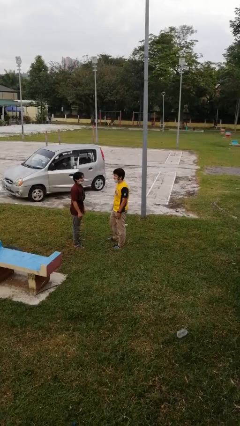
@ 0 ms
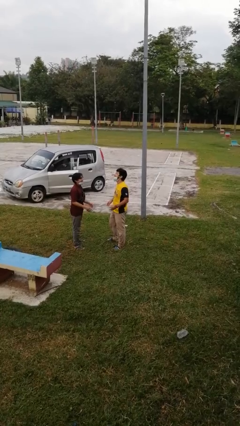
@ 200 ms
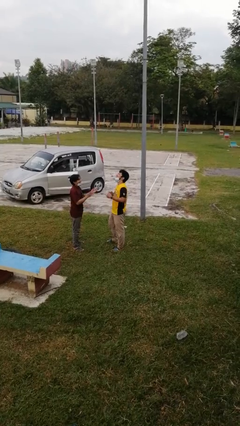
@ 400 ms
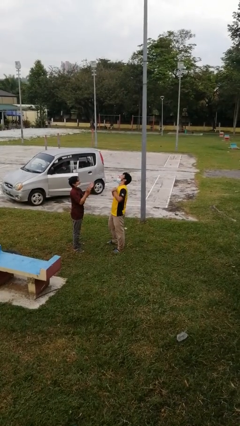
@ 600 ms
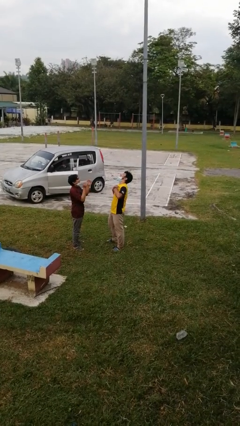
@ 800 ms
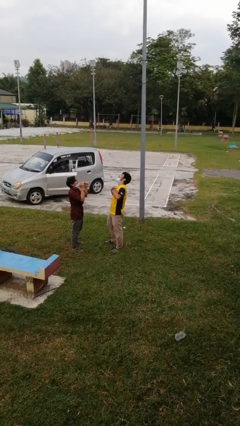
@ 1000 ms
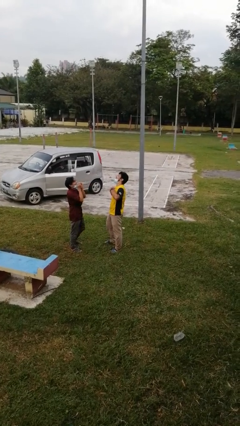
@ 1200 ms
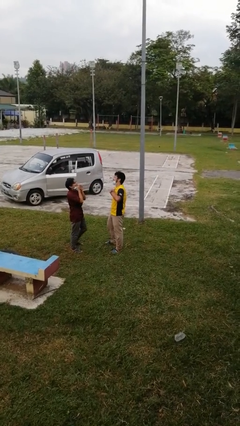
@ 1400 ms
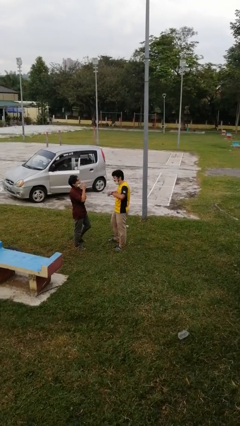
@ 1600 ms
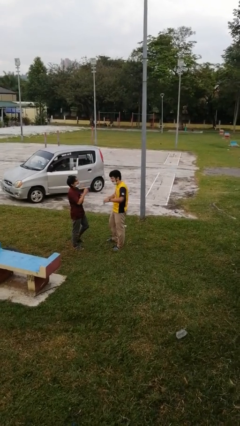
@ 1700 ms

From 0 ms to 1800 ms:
person laughs with person

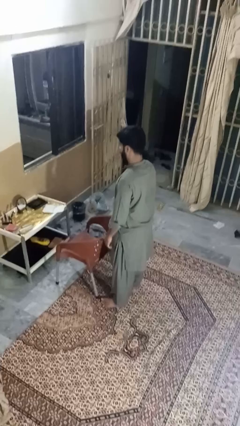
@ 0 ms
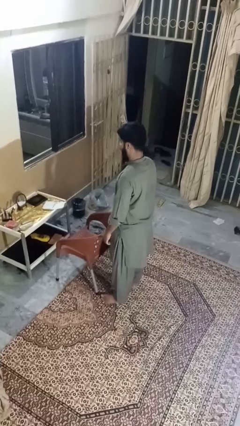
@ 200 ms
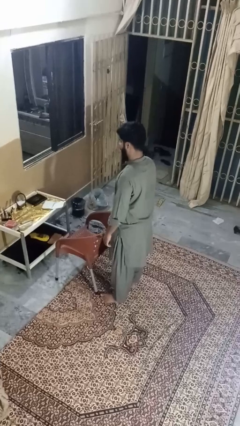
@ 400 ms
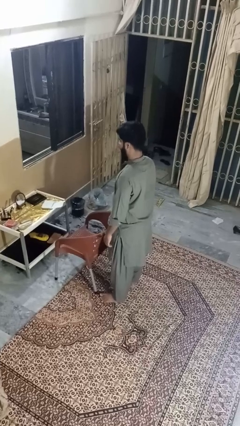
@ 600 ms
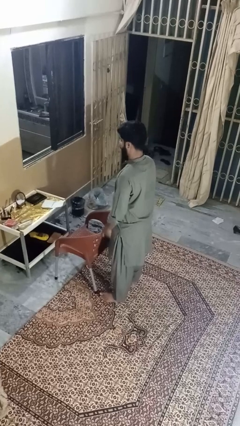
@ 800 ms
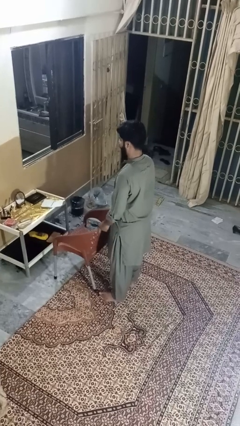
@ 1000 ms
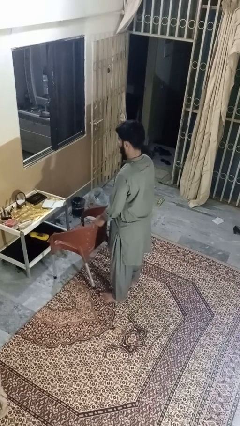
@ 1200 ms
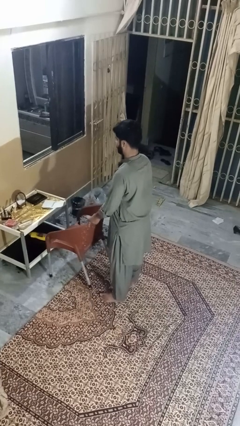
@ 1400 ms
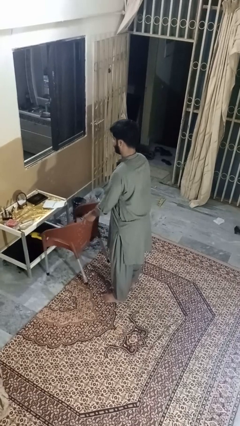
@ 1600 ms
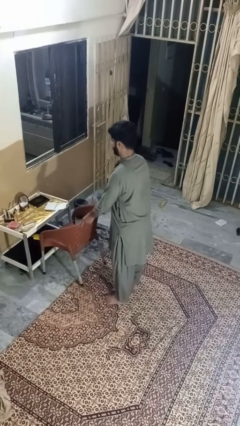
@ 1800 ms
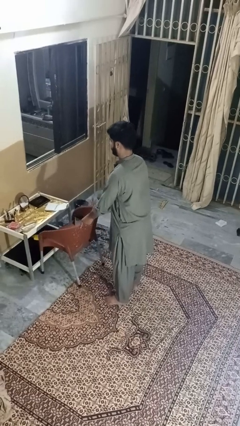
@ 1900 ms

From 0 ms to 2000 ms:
person pushes in chair

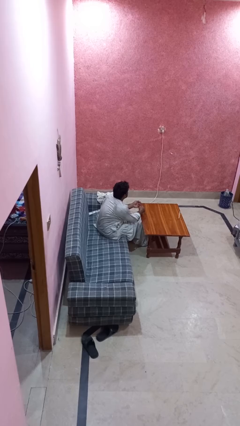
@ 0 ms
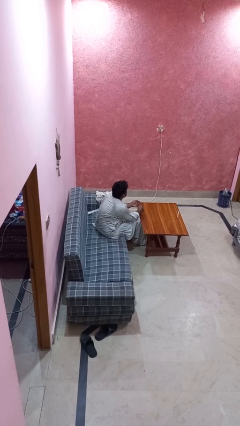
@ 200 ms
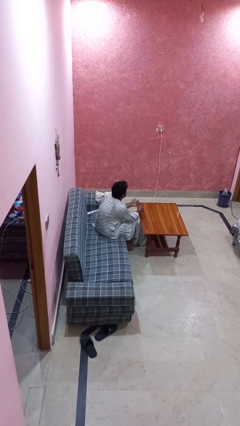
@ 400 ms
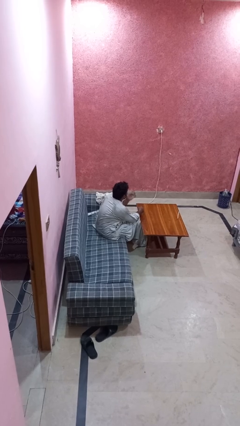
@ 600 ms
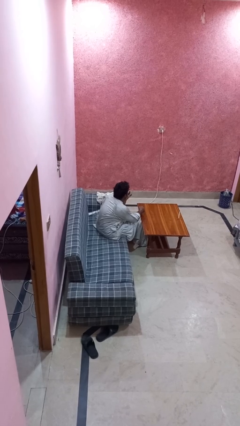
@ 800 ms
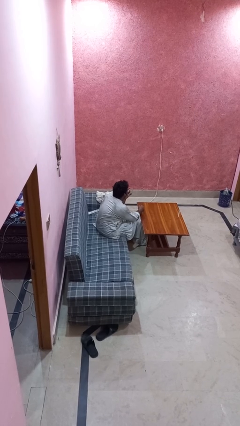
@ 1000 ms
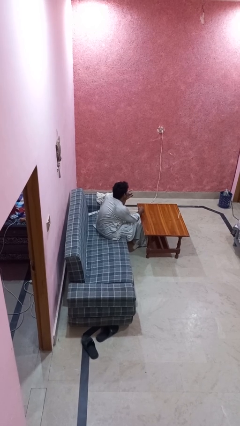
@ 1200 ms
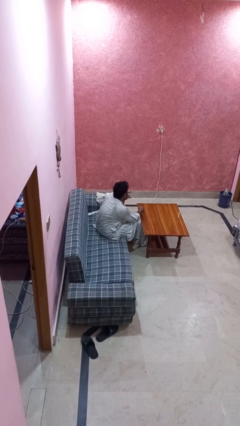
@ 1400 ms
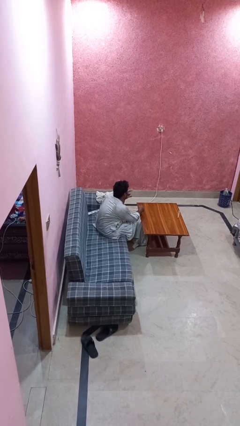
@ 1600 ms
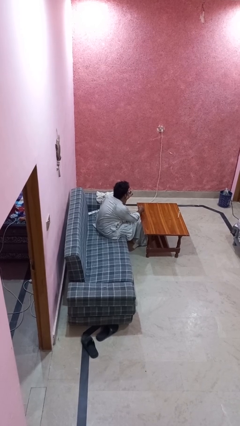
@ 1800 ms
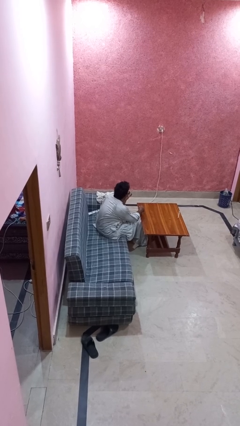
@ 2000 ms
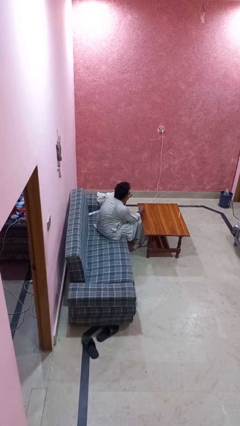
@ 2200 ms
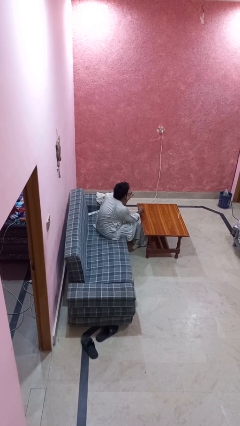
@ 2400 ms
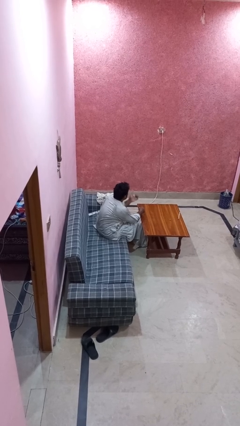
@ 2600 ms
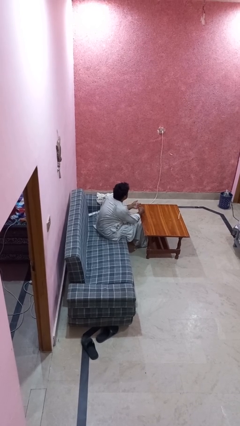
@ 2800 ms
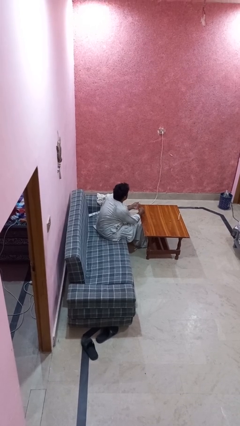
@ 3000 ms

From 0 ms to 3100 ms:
person licks fingers

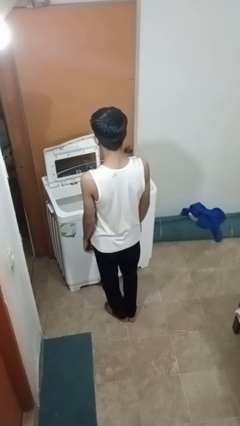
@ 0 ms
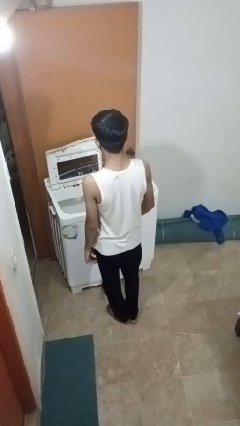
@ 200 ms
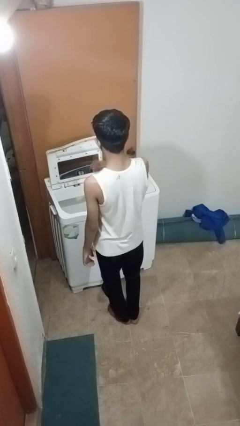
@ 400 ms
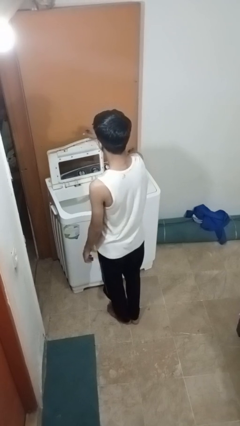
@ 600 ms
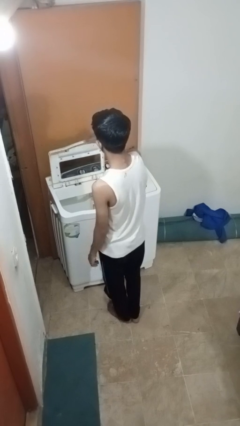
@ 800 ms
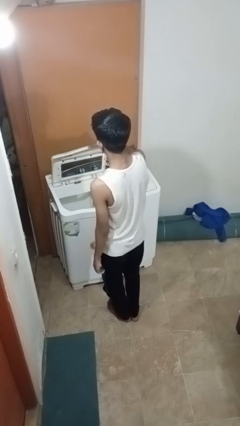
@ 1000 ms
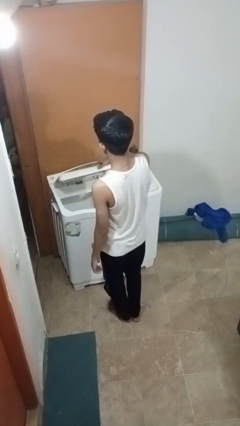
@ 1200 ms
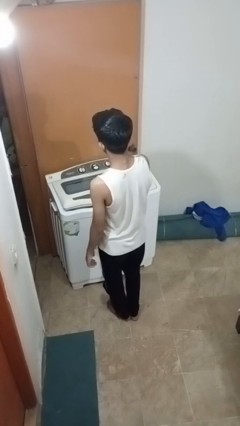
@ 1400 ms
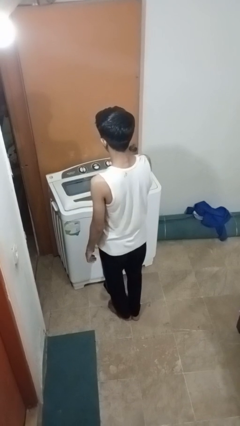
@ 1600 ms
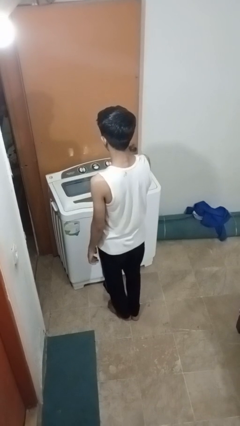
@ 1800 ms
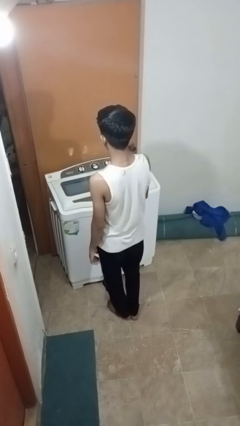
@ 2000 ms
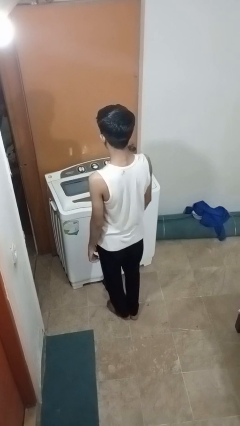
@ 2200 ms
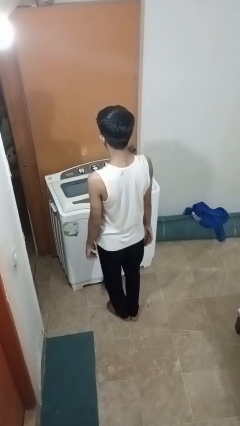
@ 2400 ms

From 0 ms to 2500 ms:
person closes clothes washer

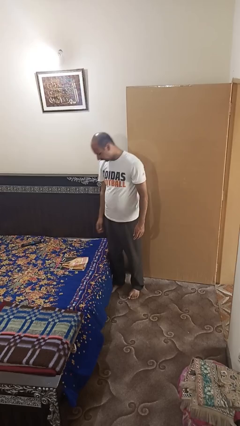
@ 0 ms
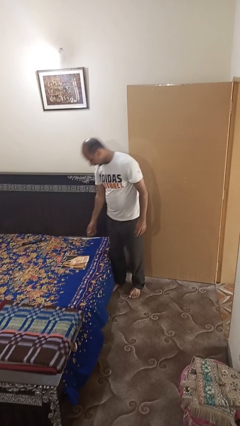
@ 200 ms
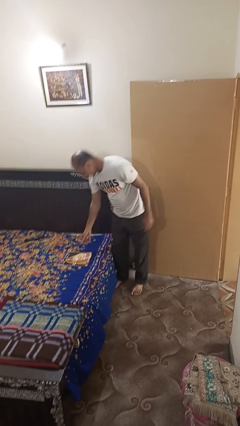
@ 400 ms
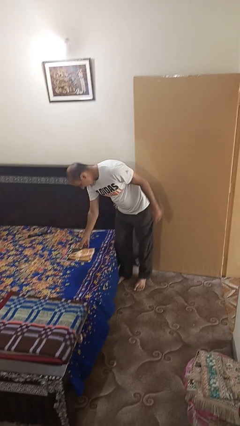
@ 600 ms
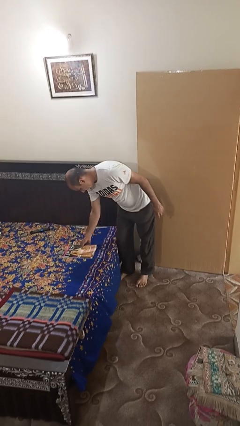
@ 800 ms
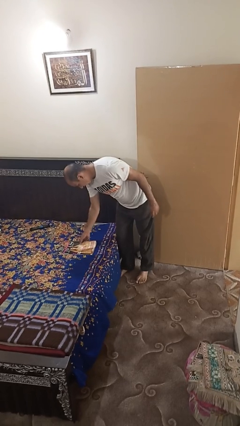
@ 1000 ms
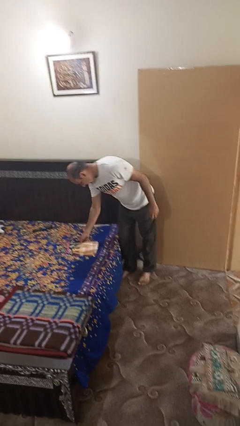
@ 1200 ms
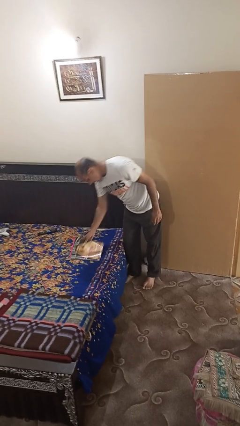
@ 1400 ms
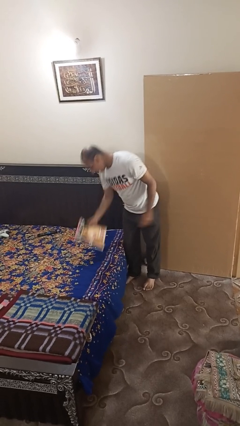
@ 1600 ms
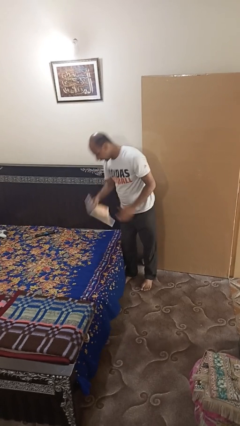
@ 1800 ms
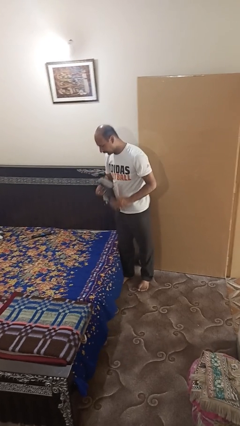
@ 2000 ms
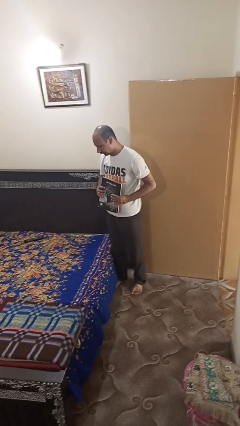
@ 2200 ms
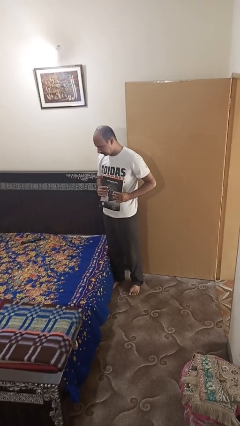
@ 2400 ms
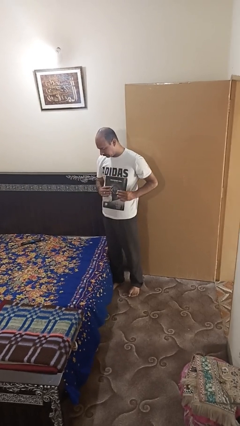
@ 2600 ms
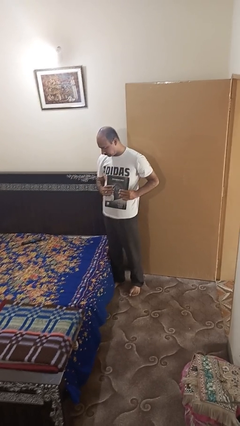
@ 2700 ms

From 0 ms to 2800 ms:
person picks up object from bed

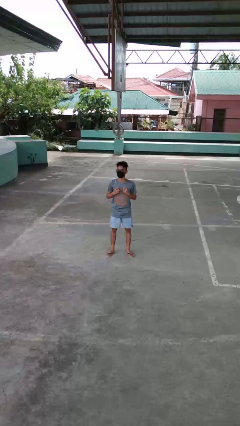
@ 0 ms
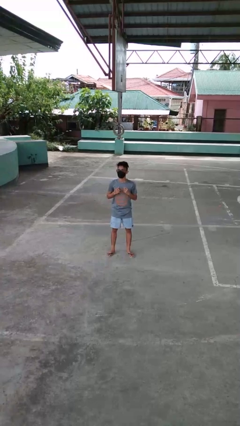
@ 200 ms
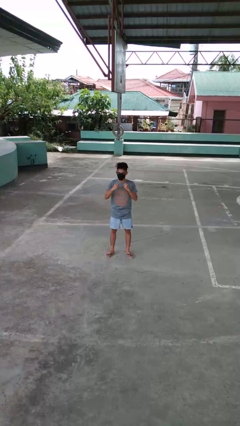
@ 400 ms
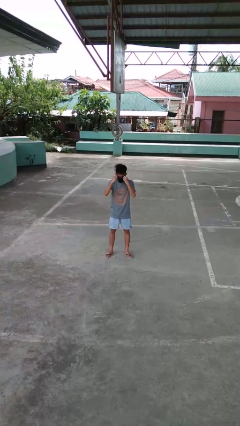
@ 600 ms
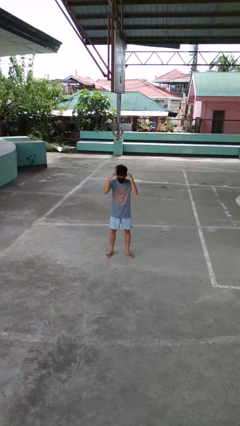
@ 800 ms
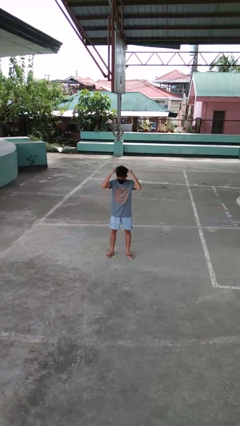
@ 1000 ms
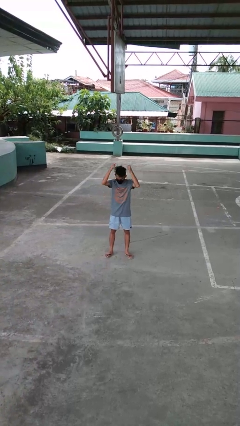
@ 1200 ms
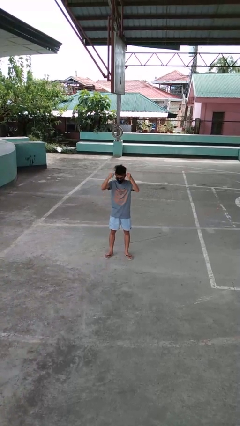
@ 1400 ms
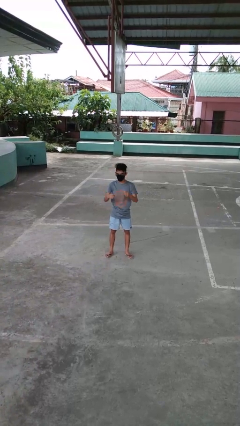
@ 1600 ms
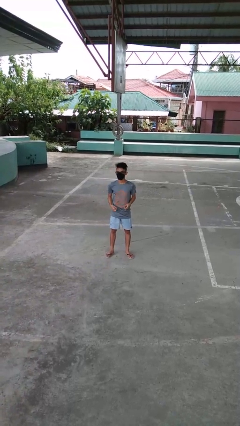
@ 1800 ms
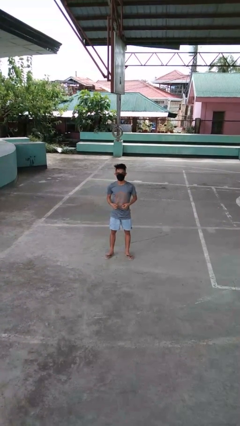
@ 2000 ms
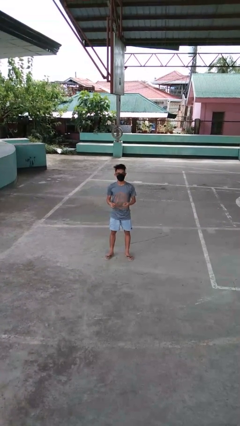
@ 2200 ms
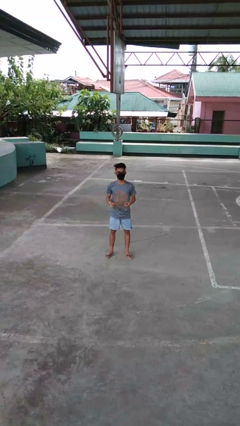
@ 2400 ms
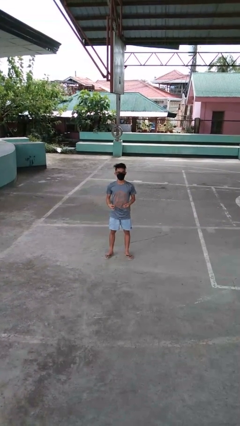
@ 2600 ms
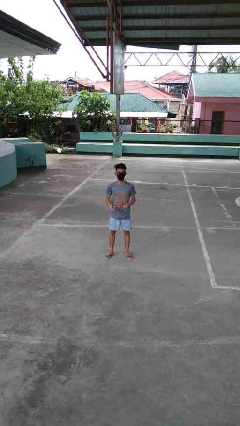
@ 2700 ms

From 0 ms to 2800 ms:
person takes off necklace

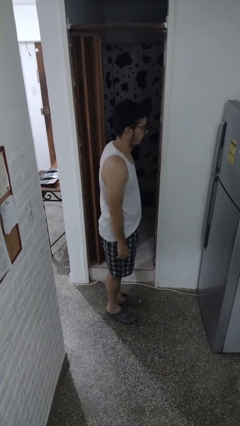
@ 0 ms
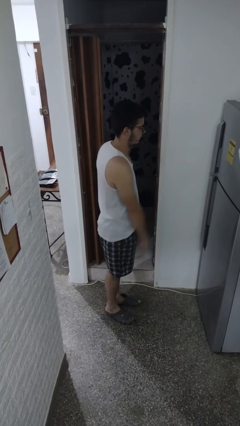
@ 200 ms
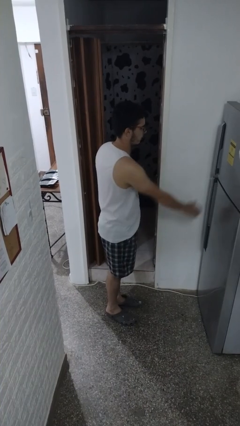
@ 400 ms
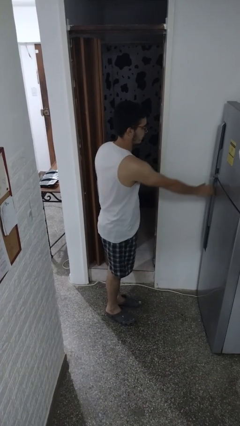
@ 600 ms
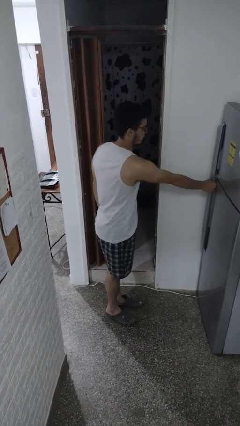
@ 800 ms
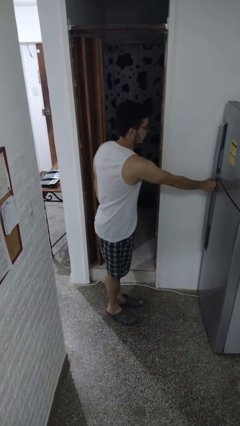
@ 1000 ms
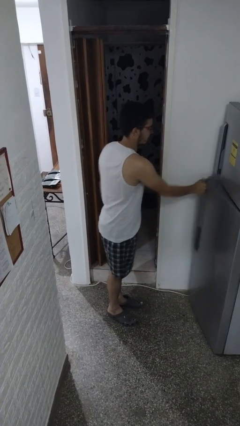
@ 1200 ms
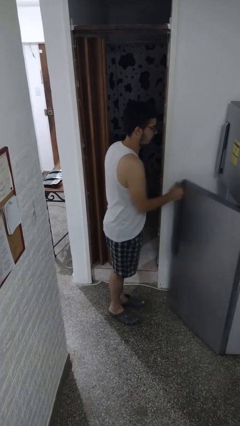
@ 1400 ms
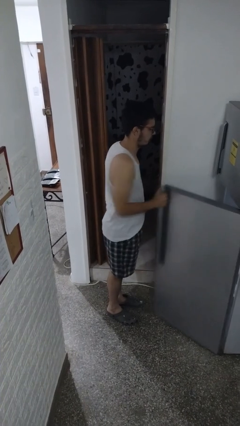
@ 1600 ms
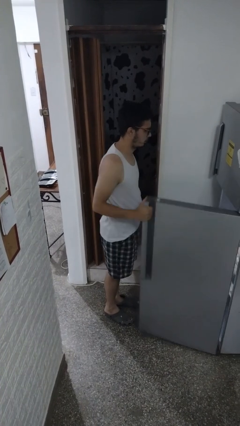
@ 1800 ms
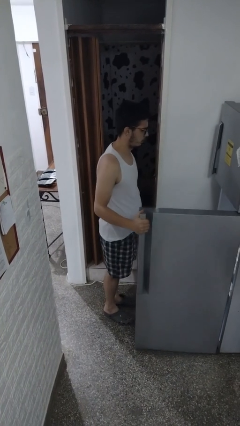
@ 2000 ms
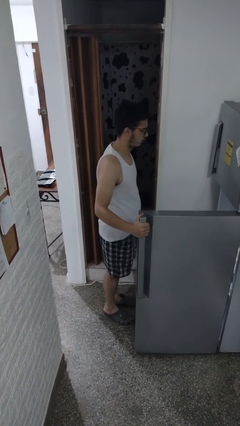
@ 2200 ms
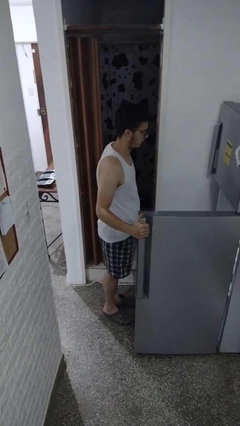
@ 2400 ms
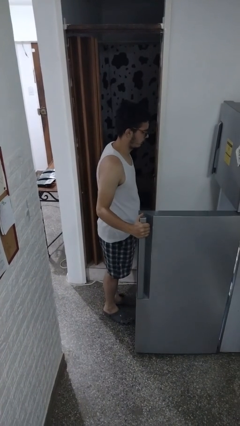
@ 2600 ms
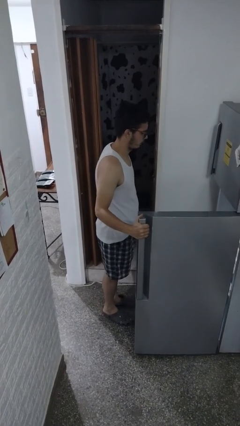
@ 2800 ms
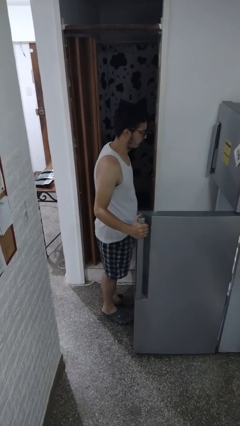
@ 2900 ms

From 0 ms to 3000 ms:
person opens refrigerator
